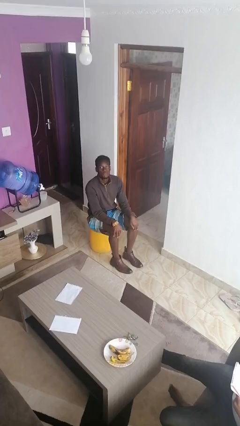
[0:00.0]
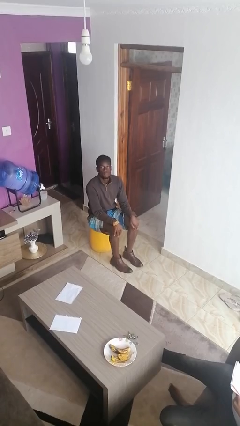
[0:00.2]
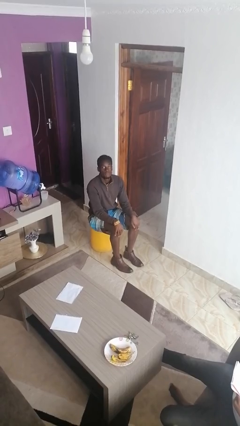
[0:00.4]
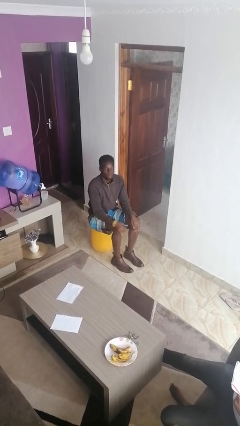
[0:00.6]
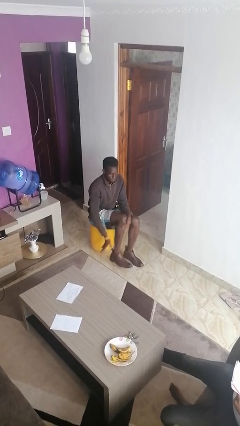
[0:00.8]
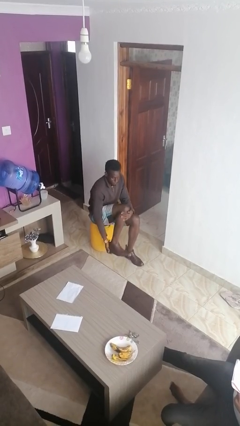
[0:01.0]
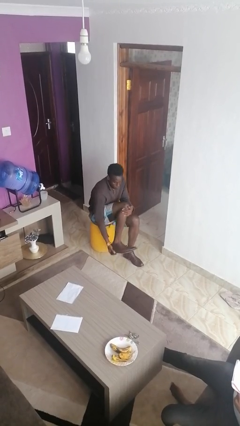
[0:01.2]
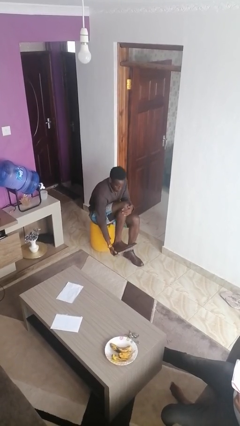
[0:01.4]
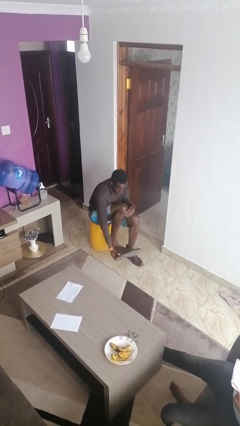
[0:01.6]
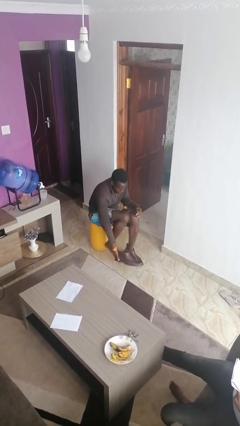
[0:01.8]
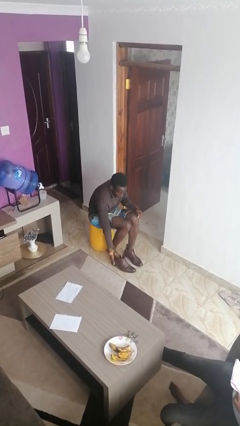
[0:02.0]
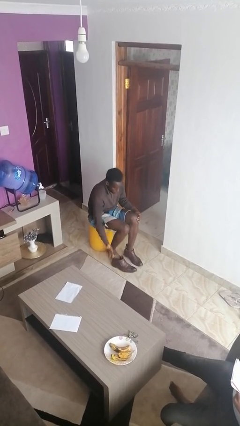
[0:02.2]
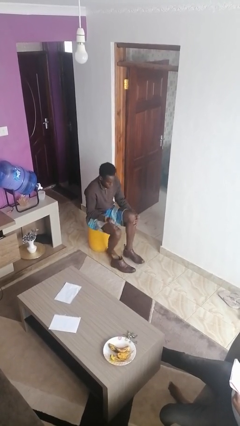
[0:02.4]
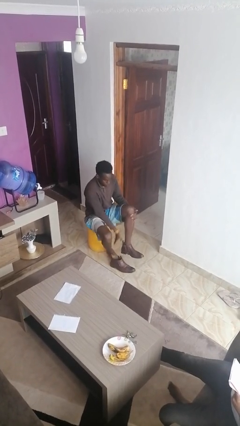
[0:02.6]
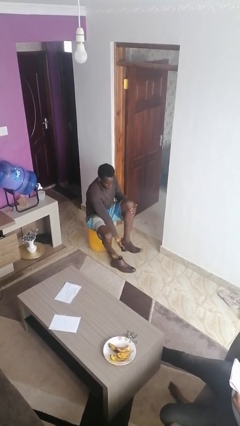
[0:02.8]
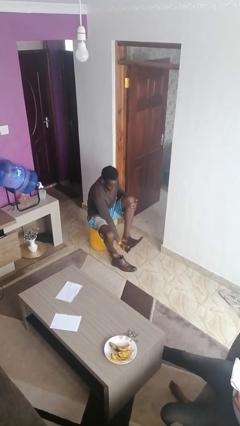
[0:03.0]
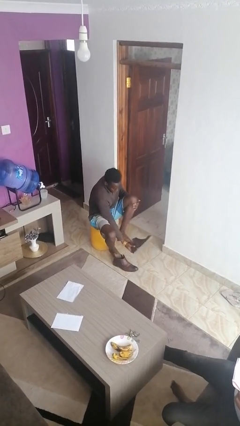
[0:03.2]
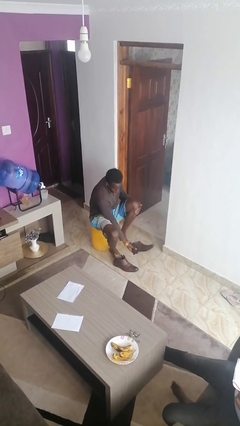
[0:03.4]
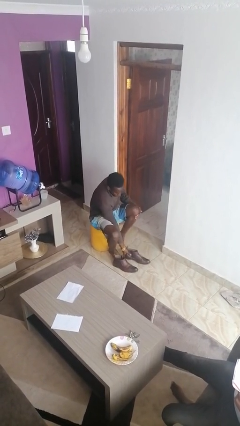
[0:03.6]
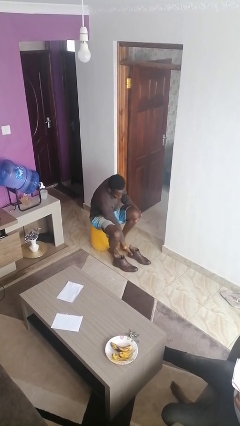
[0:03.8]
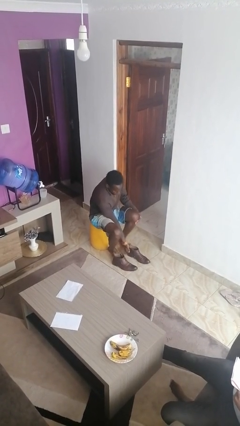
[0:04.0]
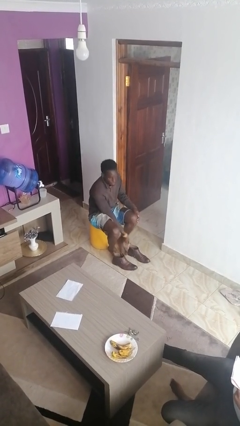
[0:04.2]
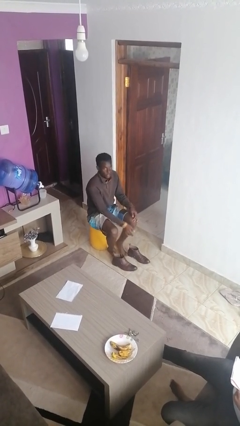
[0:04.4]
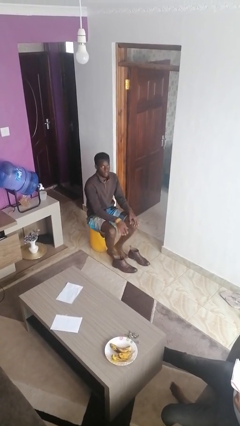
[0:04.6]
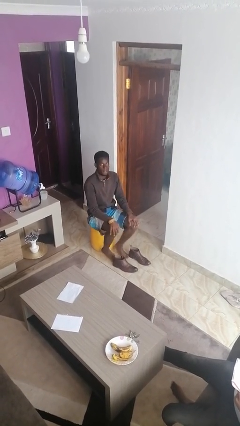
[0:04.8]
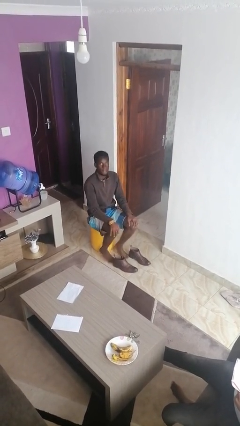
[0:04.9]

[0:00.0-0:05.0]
person takes off boots

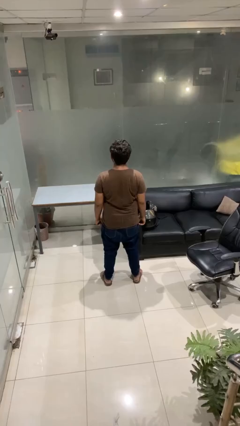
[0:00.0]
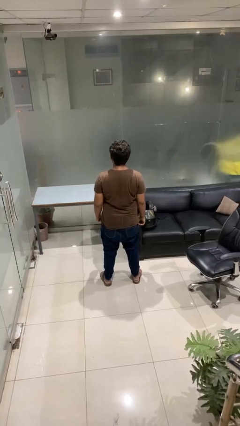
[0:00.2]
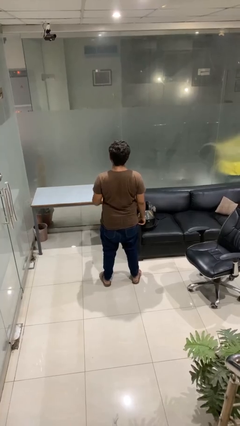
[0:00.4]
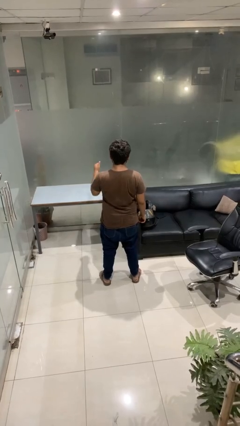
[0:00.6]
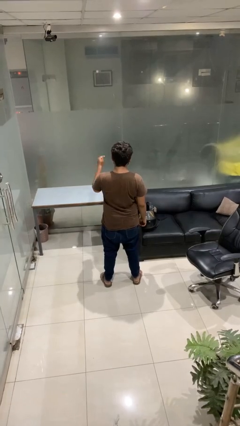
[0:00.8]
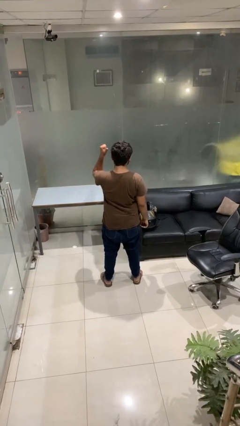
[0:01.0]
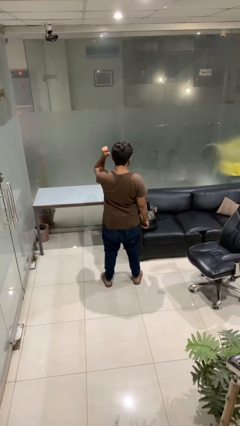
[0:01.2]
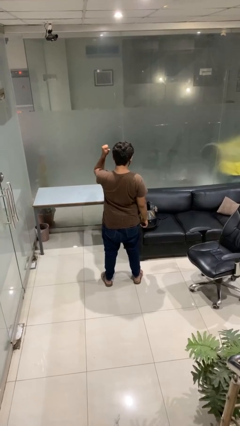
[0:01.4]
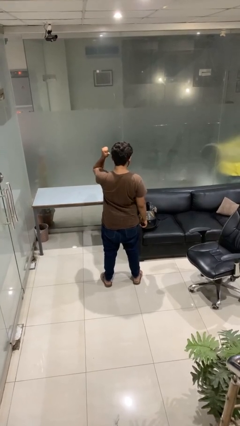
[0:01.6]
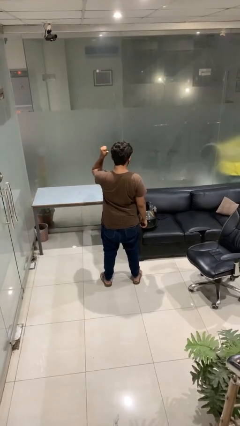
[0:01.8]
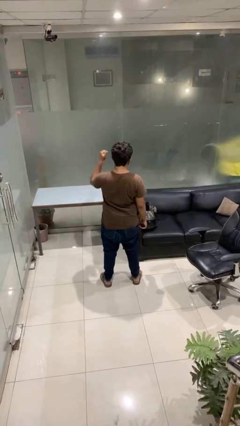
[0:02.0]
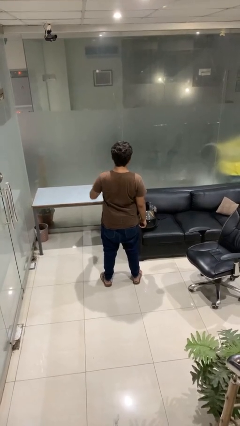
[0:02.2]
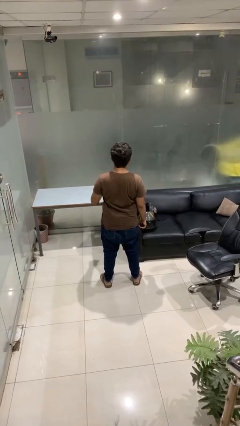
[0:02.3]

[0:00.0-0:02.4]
person gestures behind me

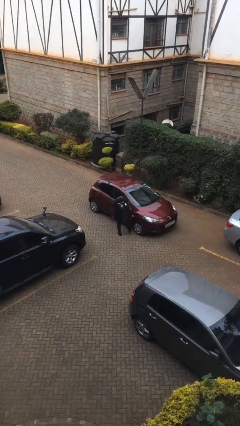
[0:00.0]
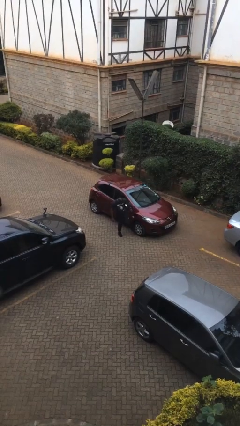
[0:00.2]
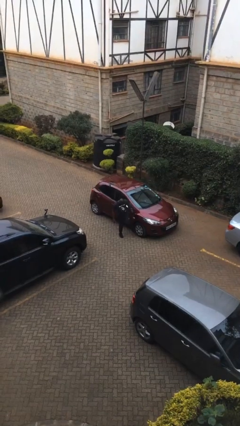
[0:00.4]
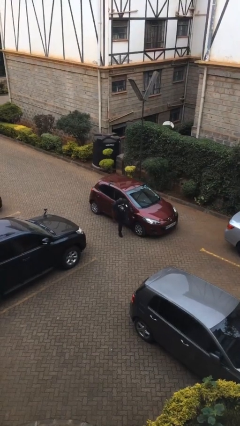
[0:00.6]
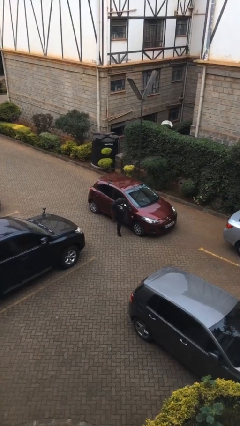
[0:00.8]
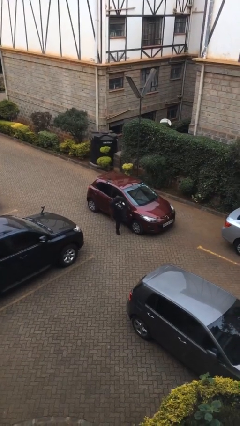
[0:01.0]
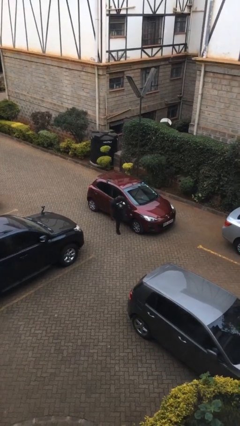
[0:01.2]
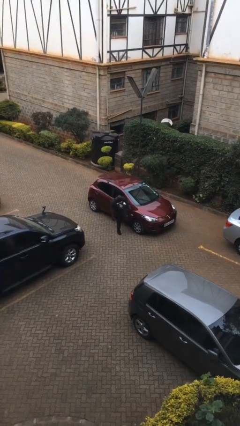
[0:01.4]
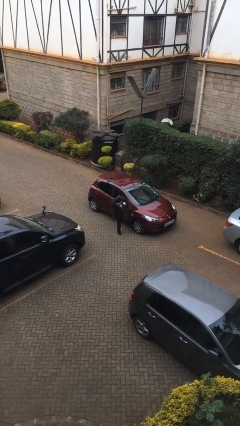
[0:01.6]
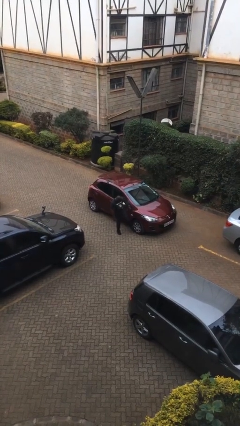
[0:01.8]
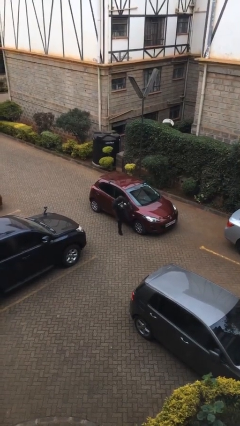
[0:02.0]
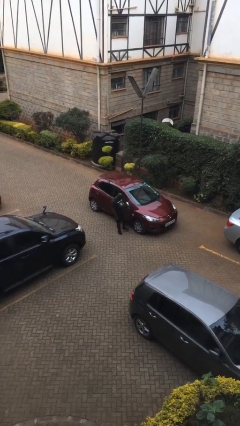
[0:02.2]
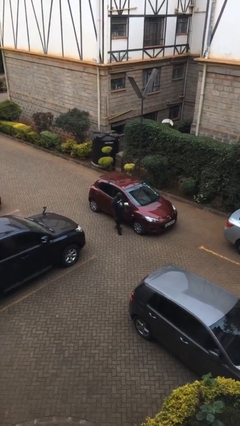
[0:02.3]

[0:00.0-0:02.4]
person kicks car tires

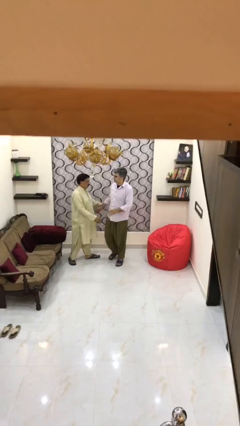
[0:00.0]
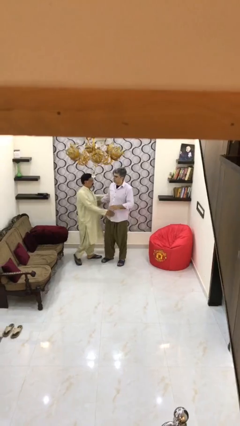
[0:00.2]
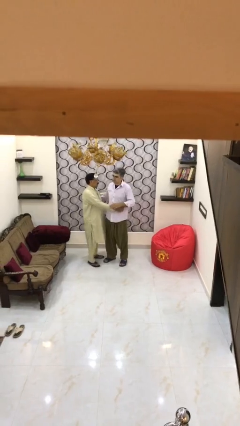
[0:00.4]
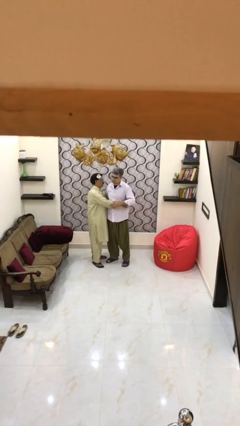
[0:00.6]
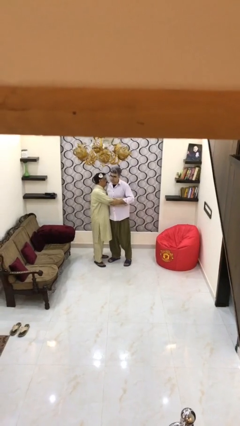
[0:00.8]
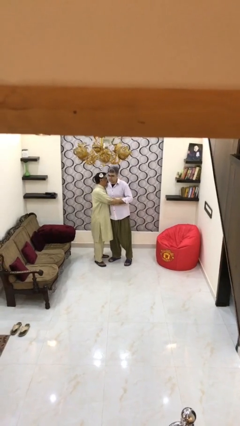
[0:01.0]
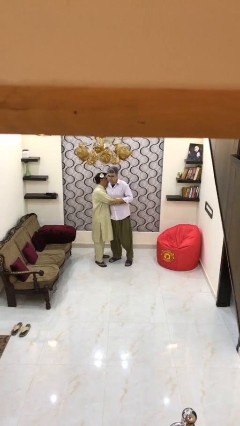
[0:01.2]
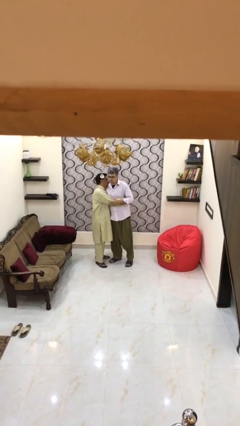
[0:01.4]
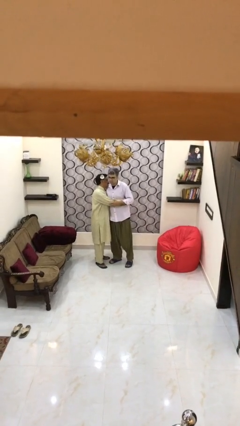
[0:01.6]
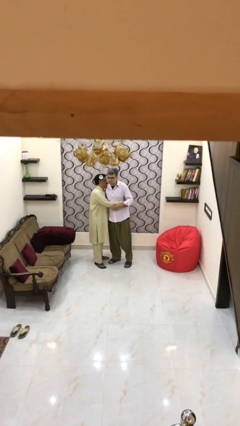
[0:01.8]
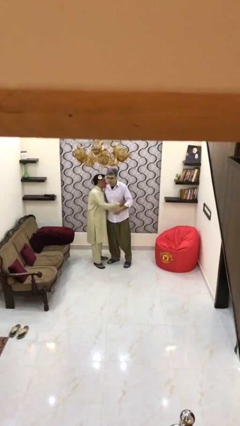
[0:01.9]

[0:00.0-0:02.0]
person embraces person

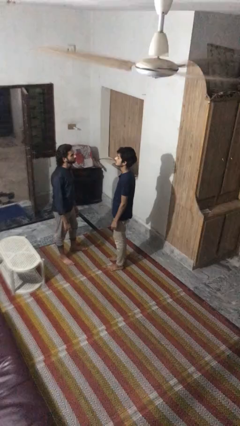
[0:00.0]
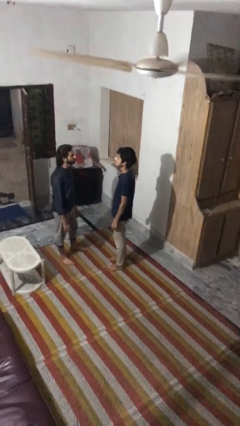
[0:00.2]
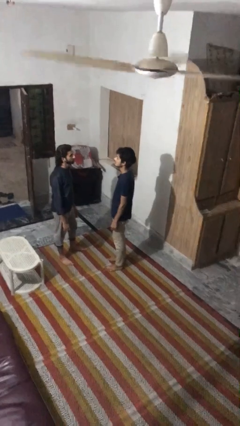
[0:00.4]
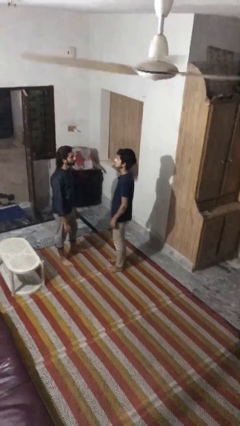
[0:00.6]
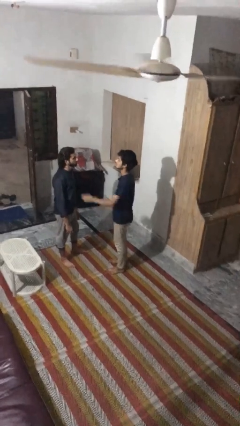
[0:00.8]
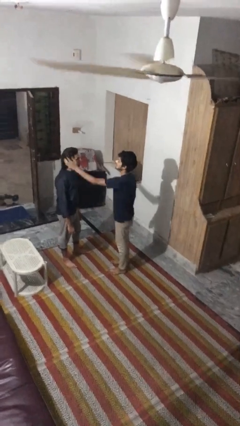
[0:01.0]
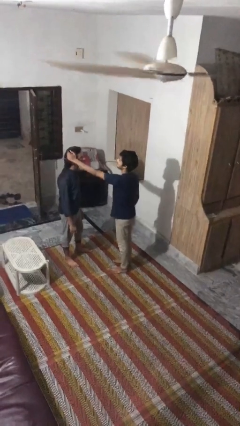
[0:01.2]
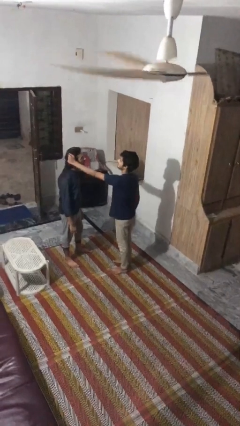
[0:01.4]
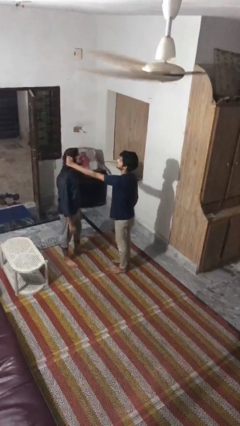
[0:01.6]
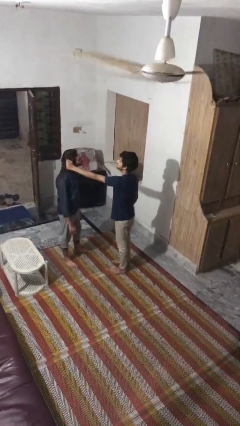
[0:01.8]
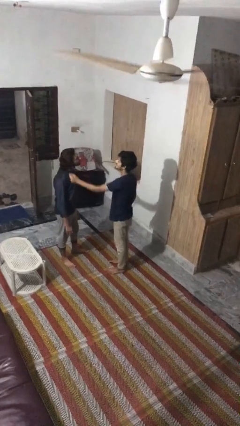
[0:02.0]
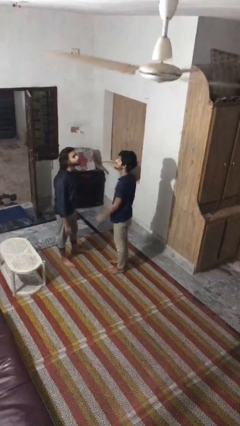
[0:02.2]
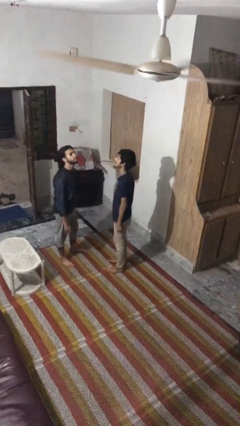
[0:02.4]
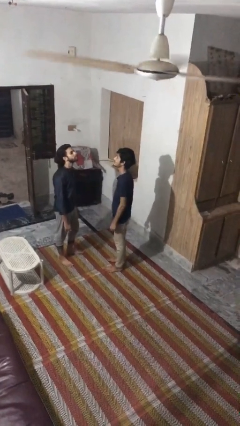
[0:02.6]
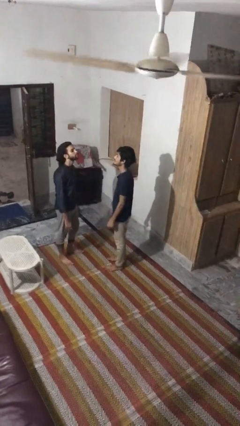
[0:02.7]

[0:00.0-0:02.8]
person grabs person by hair

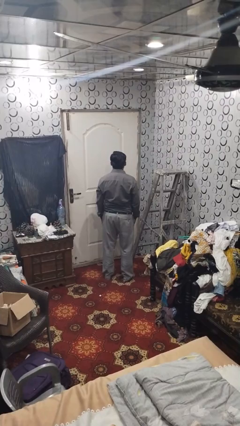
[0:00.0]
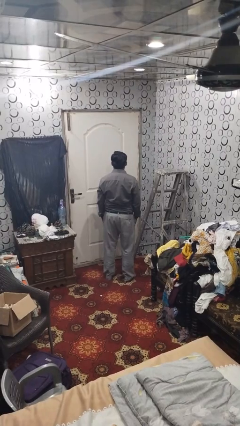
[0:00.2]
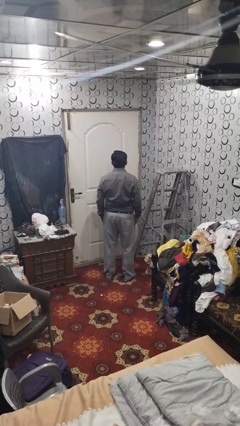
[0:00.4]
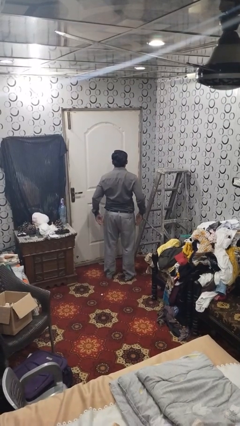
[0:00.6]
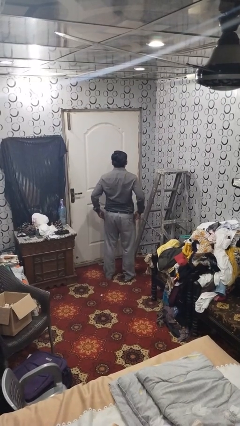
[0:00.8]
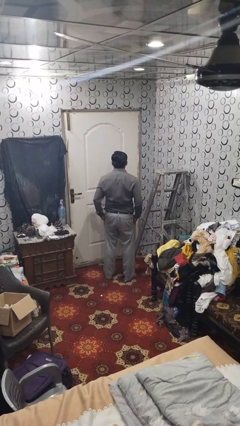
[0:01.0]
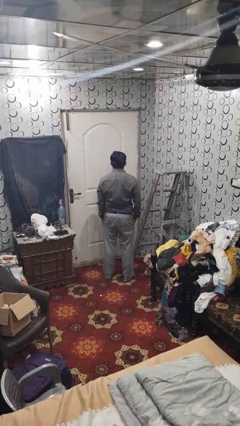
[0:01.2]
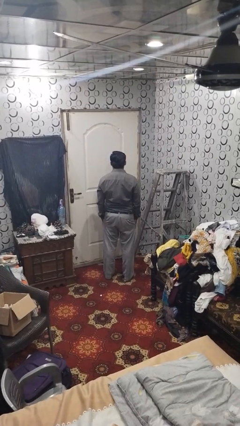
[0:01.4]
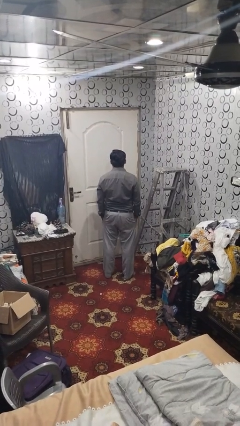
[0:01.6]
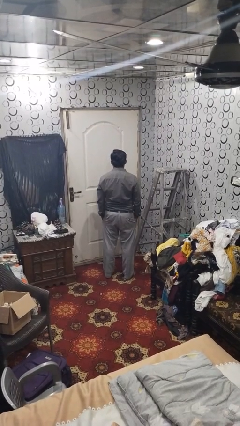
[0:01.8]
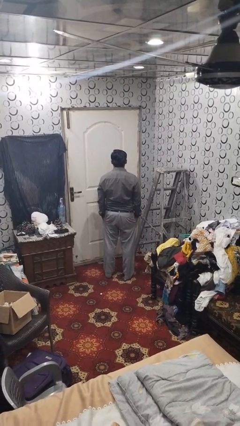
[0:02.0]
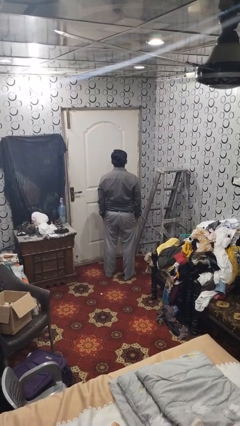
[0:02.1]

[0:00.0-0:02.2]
person puts hands in back pockets
